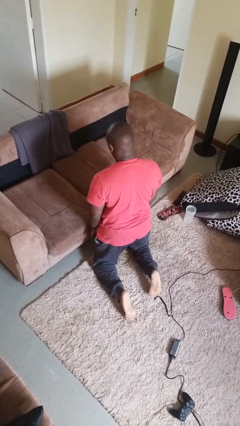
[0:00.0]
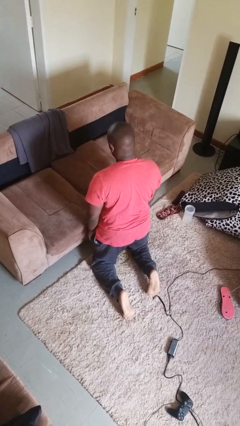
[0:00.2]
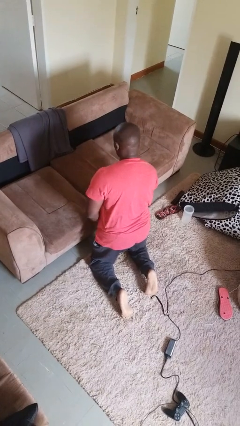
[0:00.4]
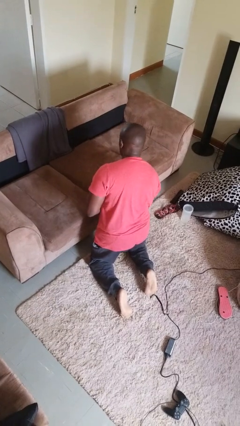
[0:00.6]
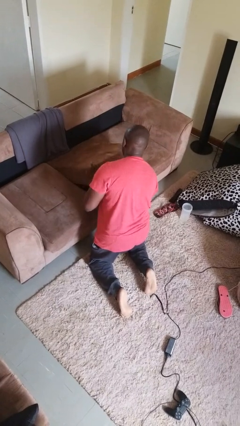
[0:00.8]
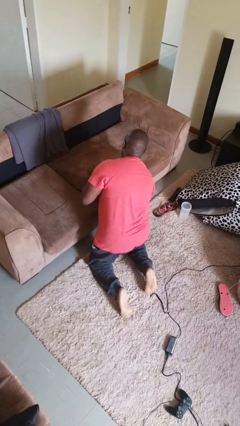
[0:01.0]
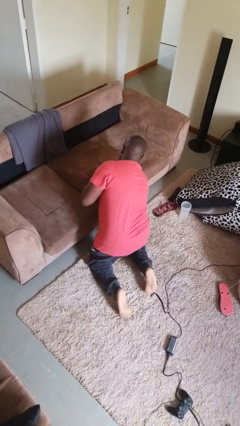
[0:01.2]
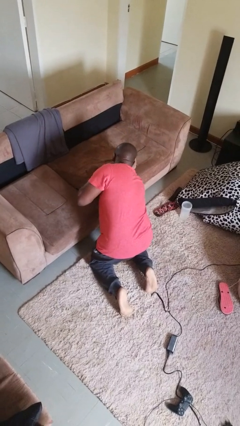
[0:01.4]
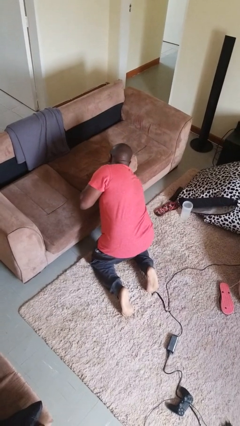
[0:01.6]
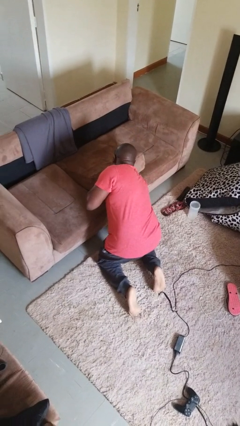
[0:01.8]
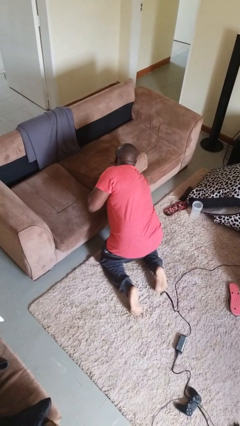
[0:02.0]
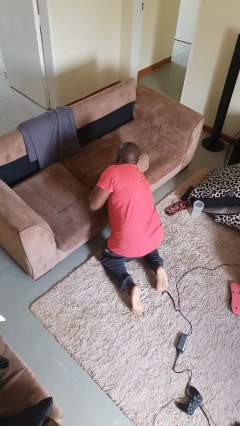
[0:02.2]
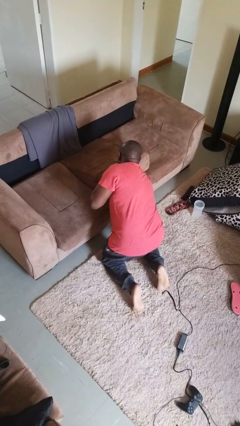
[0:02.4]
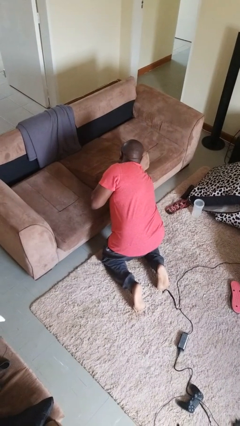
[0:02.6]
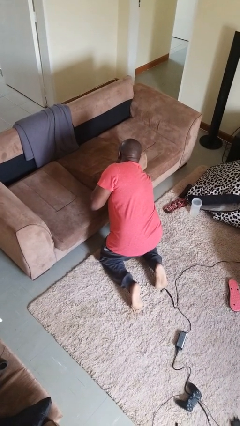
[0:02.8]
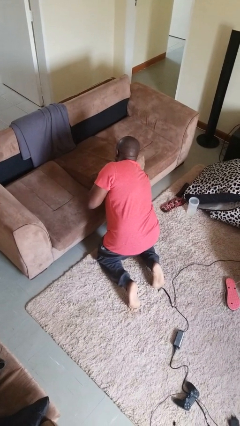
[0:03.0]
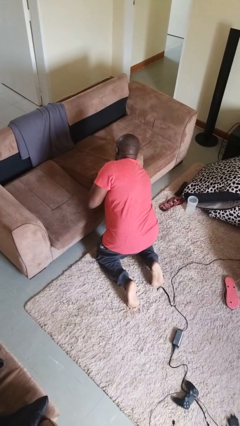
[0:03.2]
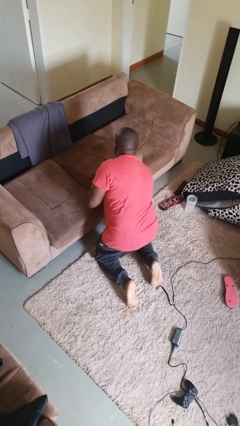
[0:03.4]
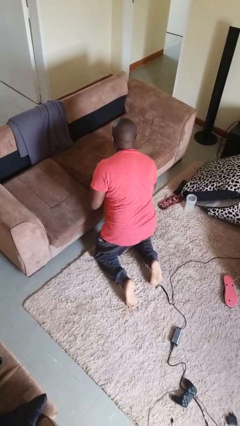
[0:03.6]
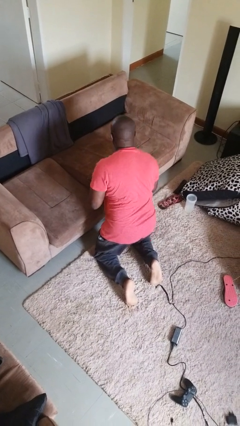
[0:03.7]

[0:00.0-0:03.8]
person searches under couch

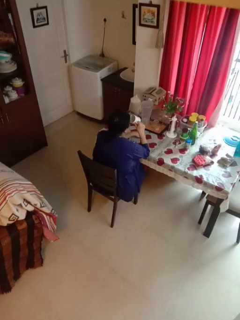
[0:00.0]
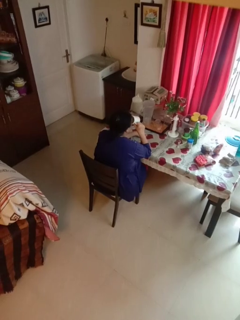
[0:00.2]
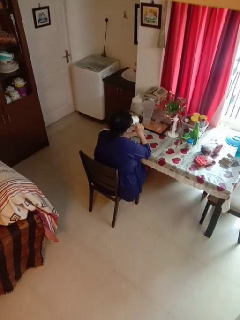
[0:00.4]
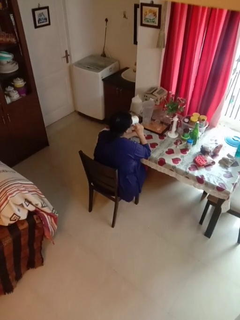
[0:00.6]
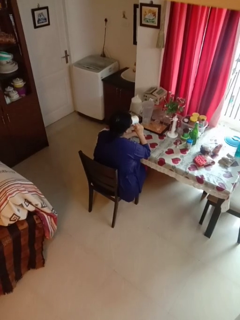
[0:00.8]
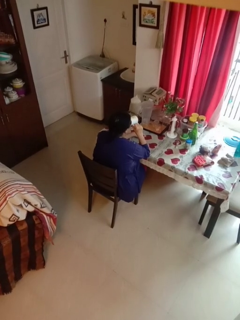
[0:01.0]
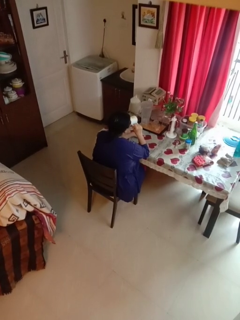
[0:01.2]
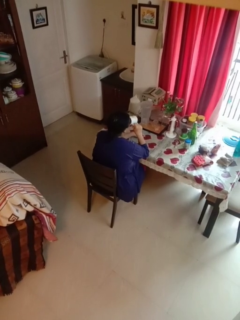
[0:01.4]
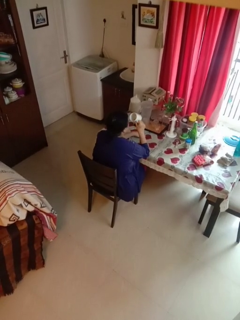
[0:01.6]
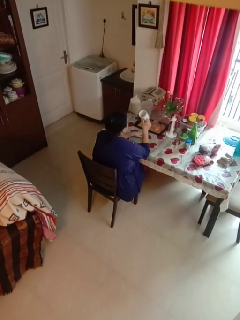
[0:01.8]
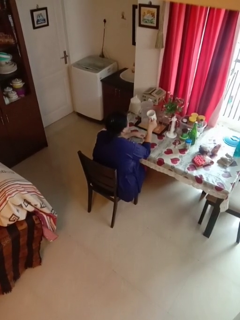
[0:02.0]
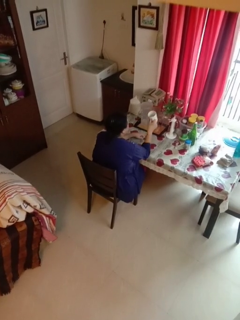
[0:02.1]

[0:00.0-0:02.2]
person drinks from mug

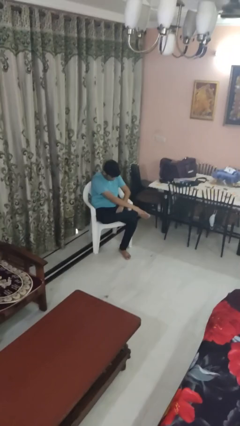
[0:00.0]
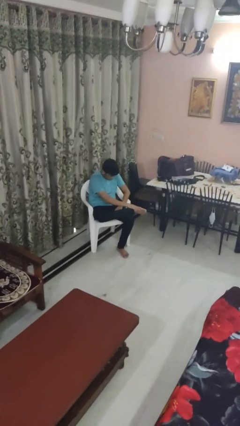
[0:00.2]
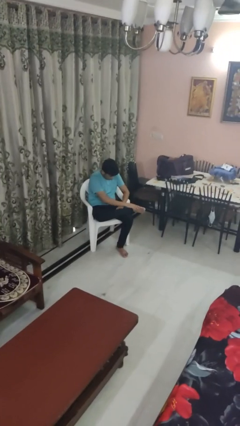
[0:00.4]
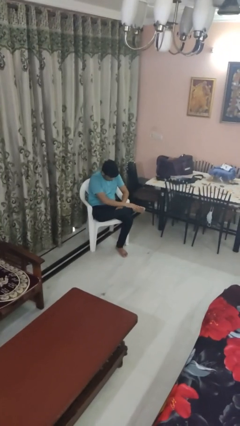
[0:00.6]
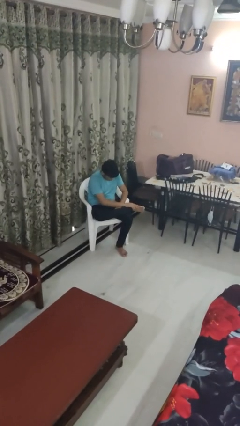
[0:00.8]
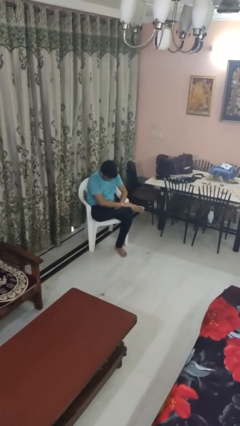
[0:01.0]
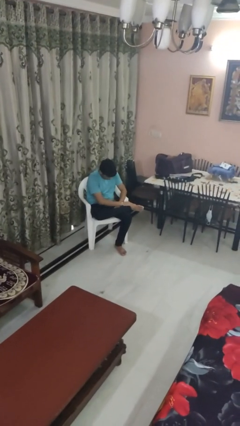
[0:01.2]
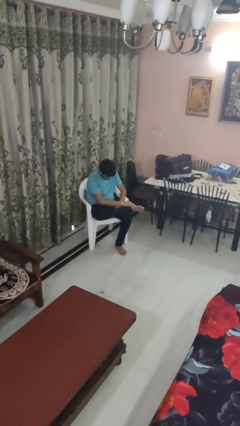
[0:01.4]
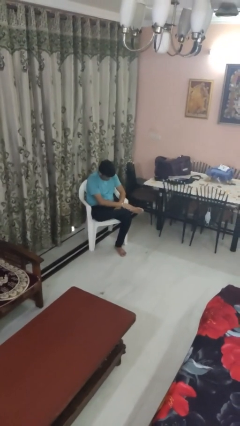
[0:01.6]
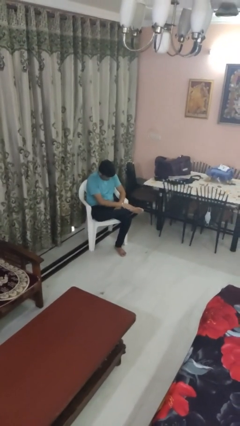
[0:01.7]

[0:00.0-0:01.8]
person swats bug

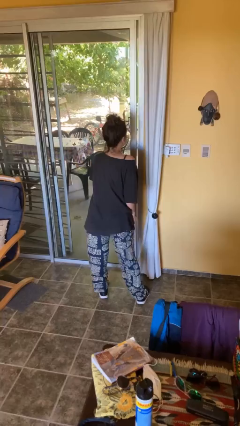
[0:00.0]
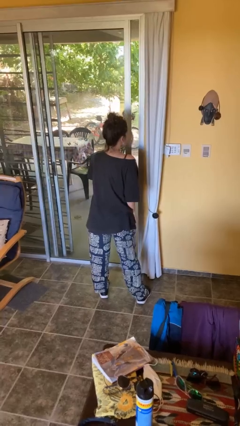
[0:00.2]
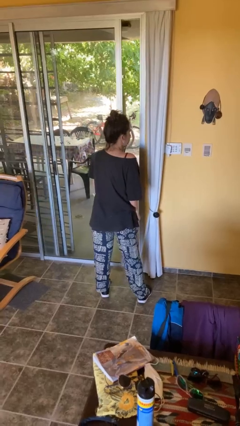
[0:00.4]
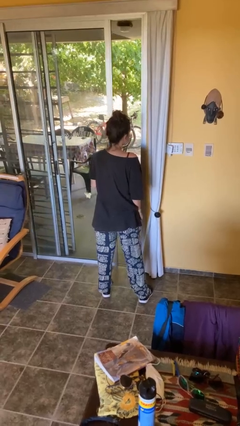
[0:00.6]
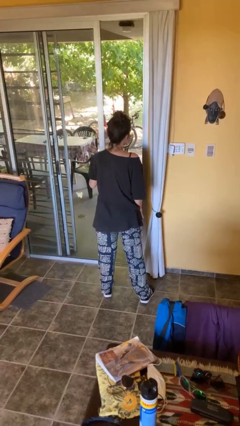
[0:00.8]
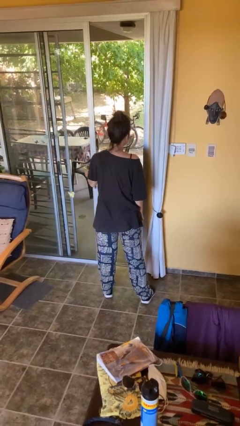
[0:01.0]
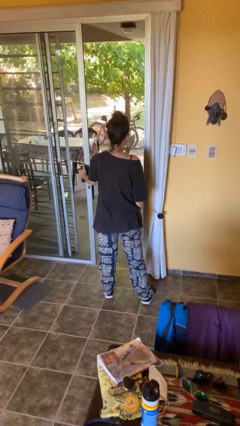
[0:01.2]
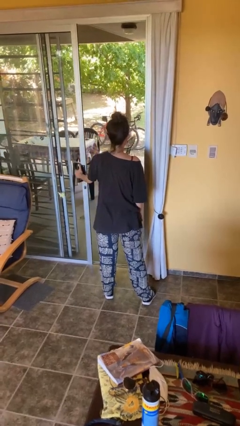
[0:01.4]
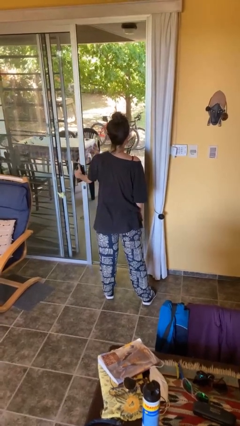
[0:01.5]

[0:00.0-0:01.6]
person opens facility door

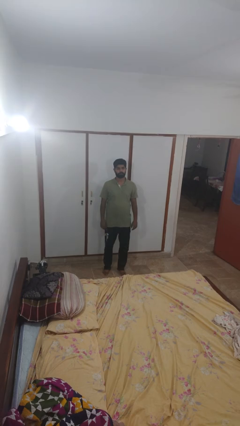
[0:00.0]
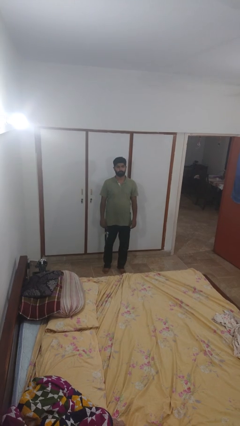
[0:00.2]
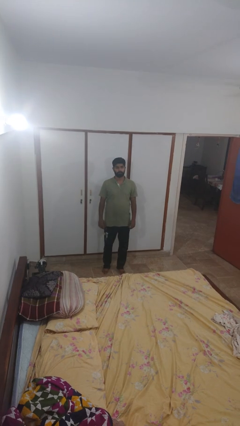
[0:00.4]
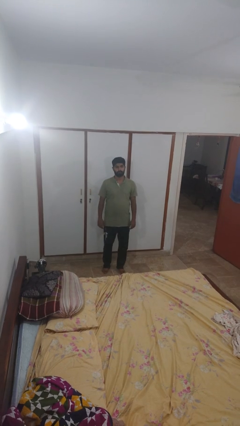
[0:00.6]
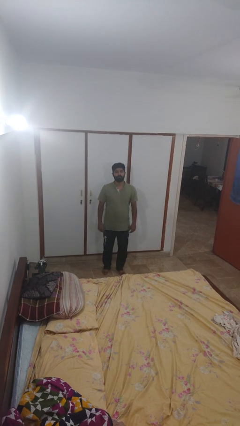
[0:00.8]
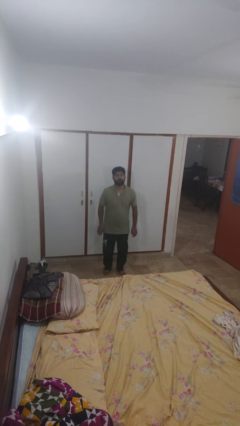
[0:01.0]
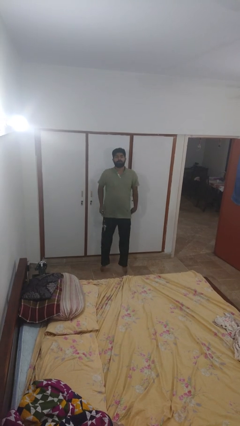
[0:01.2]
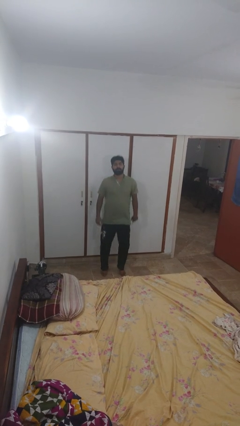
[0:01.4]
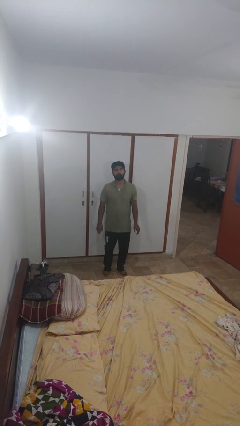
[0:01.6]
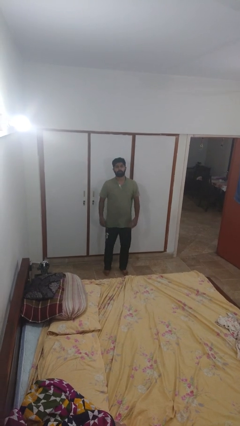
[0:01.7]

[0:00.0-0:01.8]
person jumps

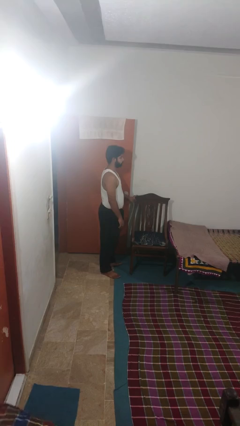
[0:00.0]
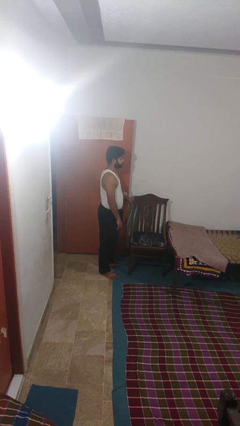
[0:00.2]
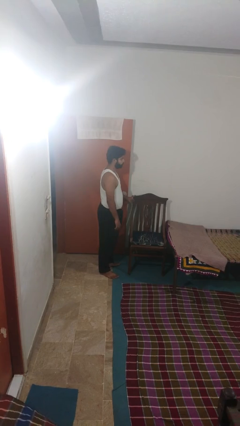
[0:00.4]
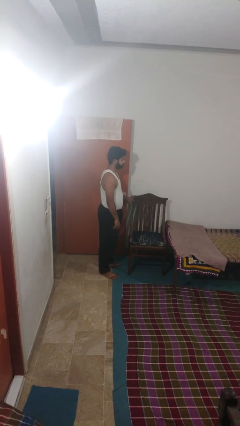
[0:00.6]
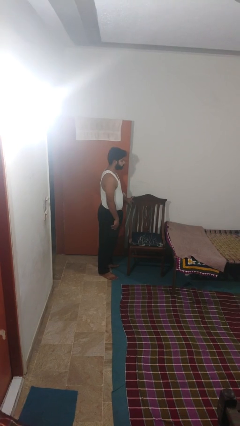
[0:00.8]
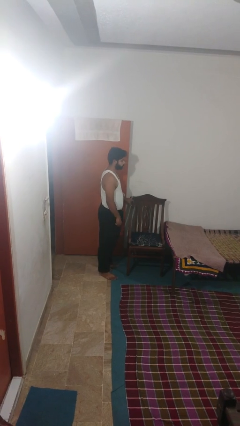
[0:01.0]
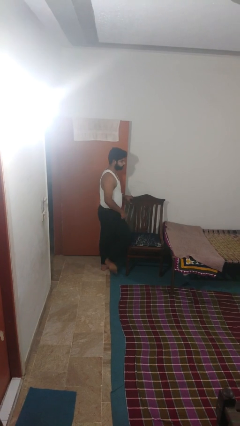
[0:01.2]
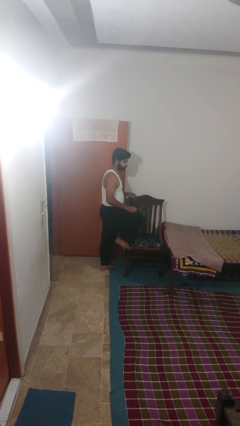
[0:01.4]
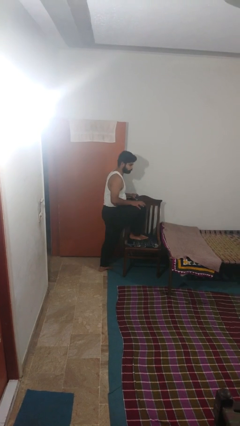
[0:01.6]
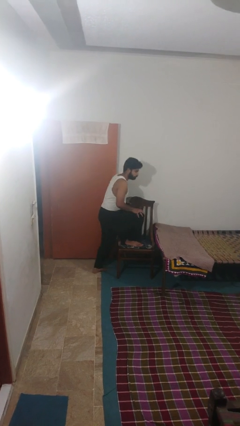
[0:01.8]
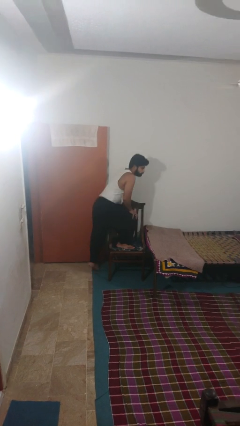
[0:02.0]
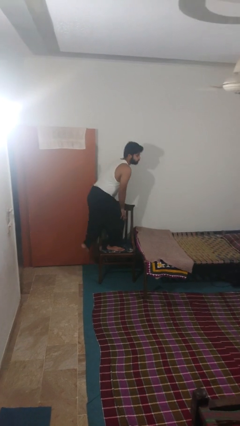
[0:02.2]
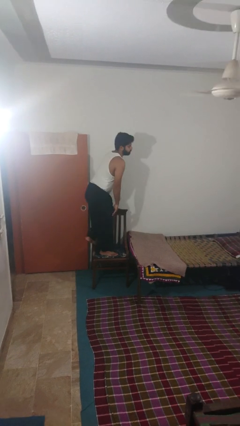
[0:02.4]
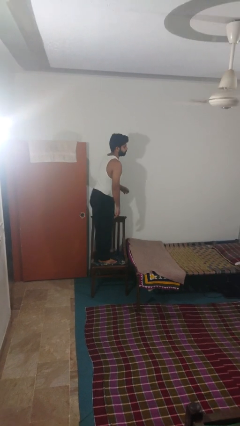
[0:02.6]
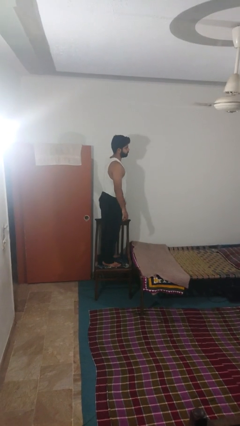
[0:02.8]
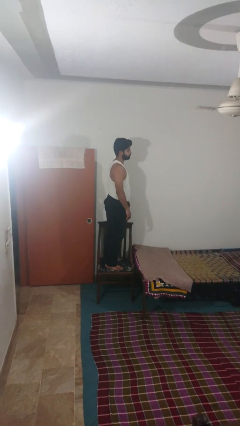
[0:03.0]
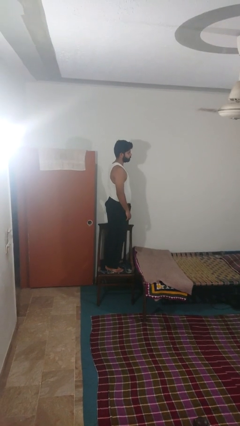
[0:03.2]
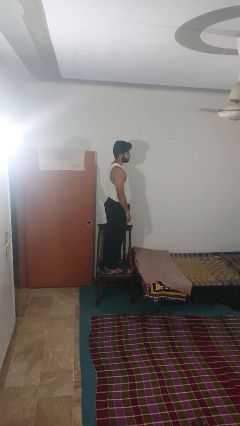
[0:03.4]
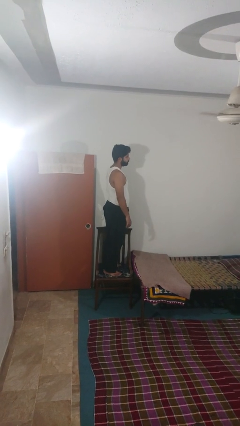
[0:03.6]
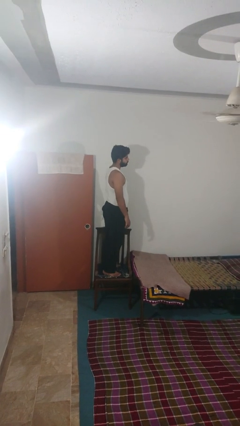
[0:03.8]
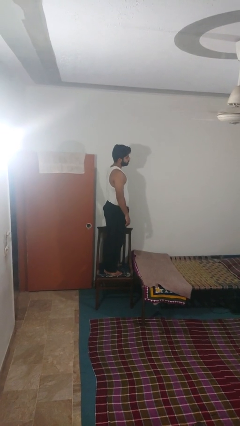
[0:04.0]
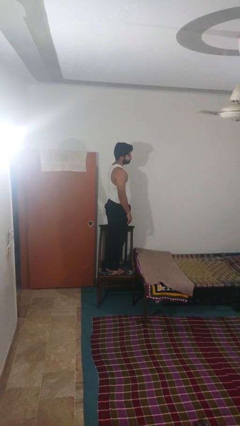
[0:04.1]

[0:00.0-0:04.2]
person climbs on chair

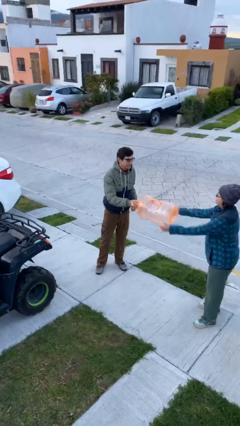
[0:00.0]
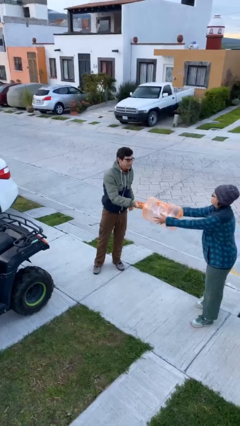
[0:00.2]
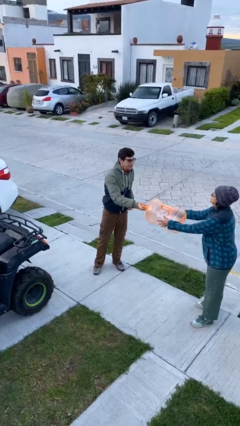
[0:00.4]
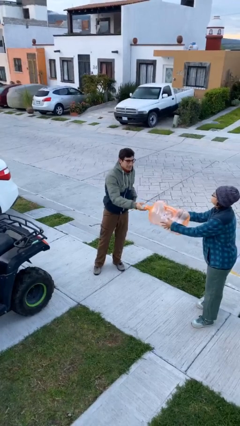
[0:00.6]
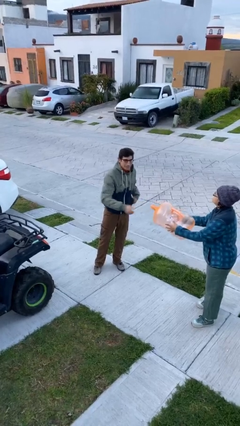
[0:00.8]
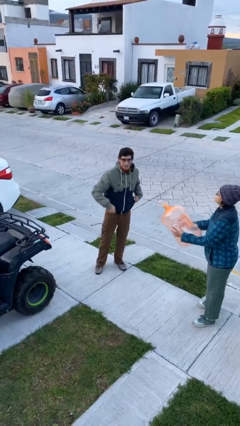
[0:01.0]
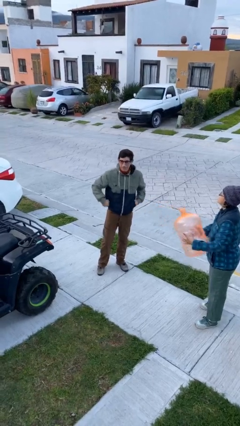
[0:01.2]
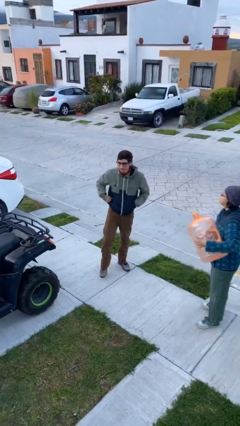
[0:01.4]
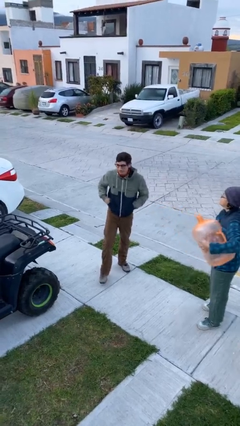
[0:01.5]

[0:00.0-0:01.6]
person transfers object to person

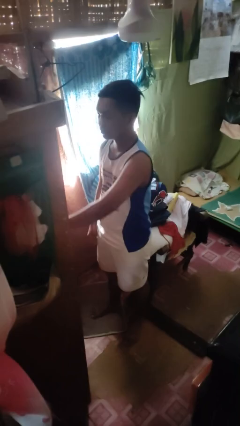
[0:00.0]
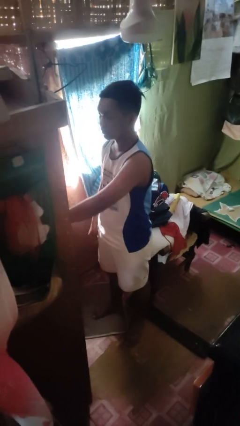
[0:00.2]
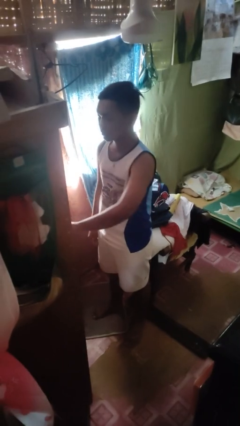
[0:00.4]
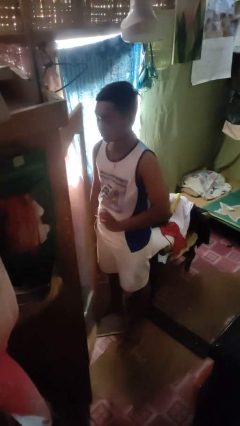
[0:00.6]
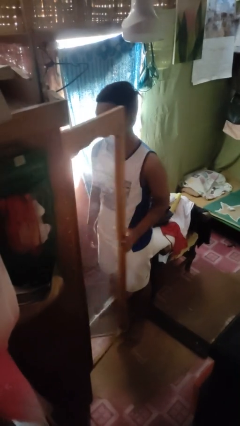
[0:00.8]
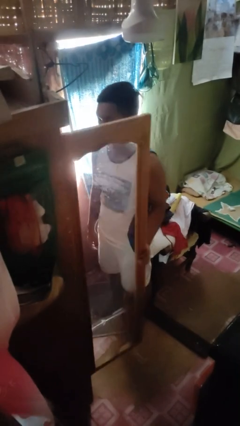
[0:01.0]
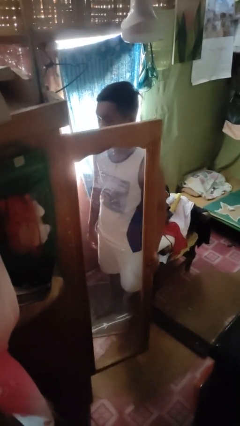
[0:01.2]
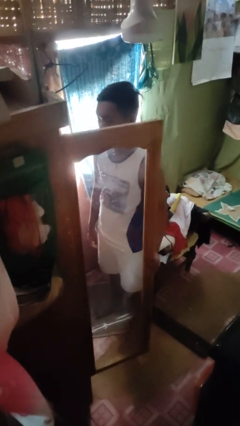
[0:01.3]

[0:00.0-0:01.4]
person opens closet door
